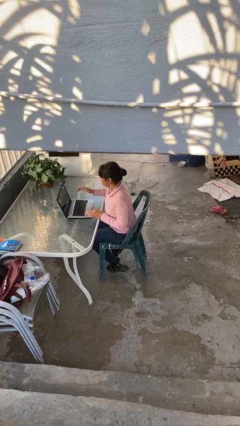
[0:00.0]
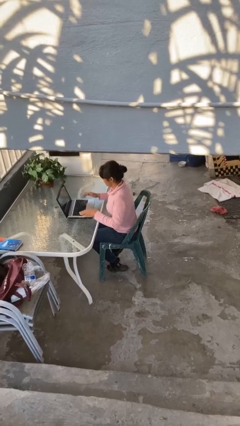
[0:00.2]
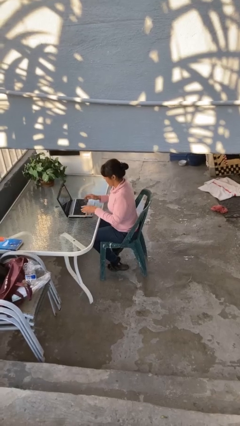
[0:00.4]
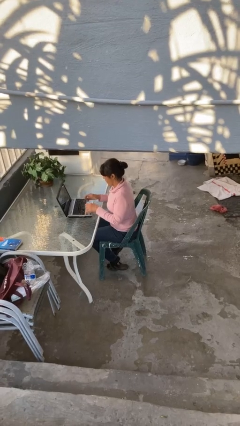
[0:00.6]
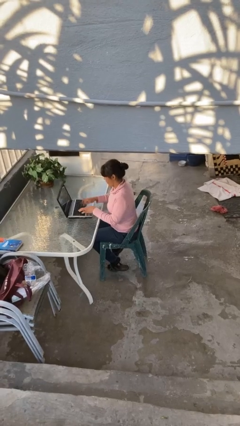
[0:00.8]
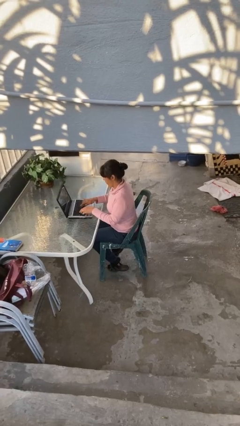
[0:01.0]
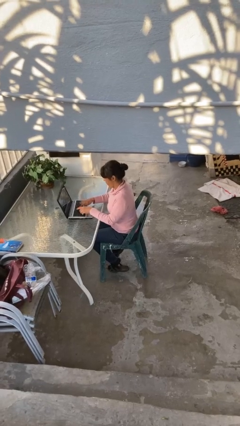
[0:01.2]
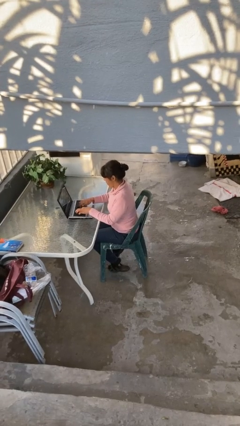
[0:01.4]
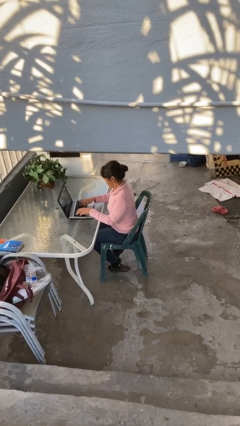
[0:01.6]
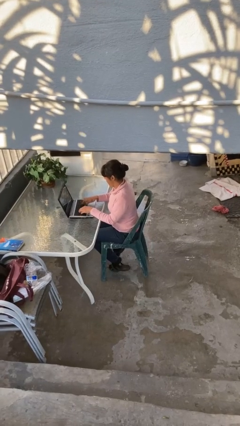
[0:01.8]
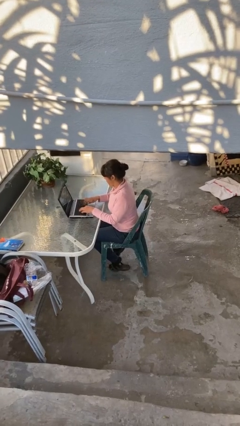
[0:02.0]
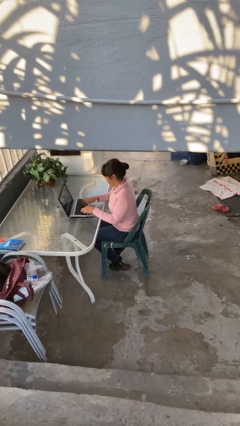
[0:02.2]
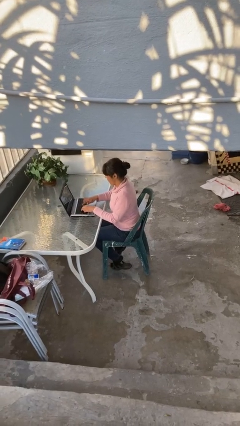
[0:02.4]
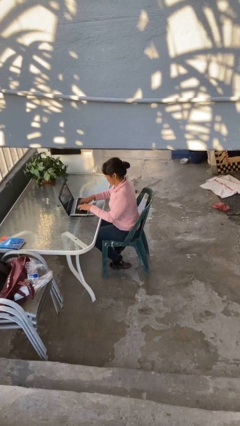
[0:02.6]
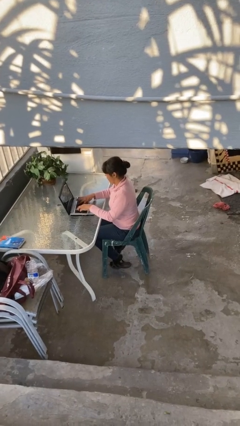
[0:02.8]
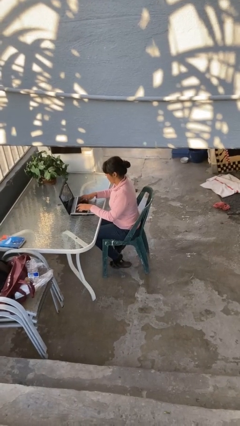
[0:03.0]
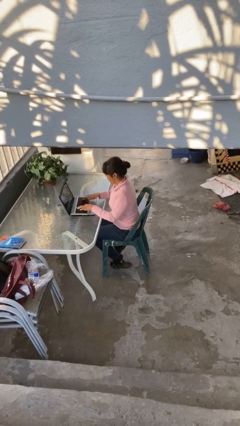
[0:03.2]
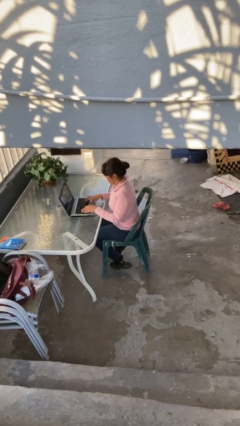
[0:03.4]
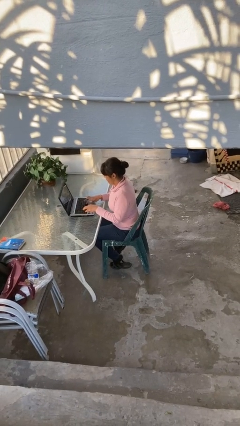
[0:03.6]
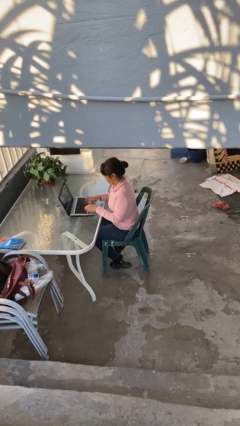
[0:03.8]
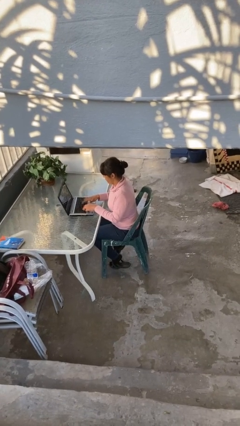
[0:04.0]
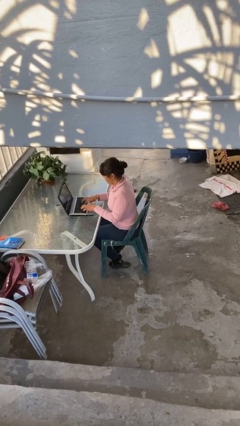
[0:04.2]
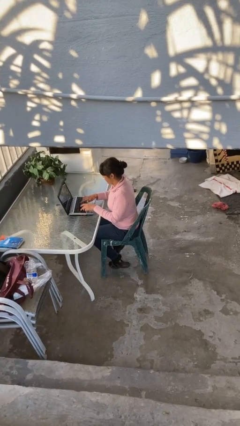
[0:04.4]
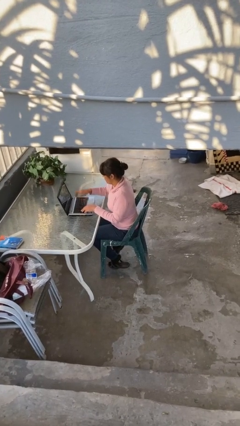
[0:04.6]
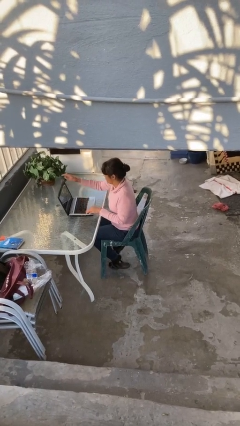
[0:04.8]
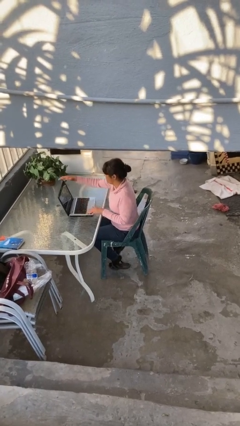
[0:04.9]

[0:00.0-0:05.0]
person interacts with laptop

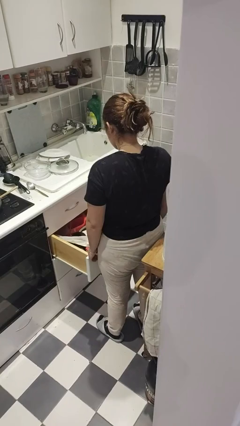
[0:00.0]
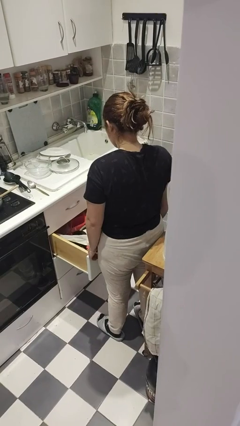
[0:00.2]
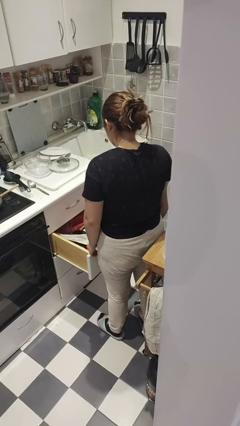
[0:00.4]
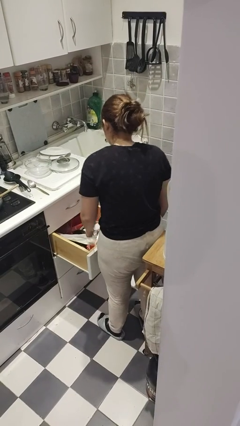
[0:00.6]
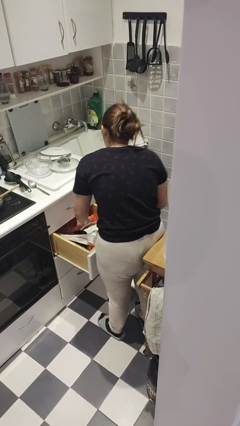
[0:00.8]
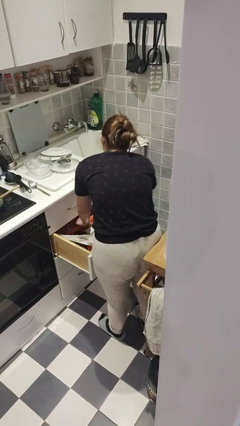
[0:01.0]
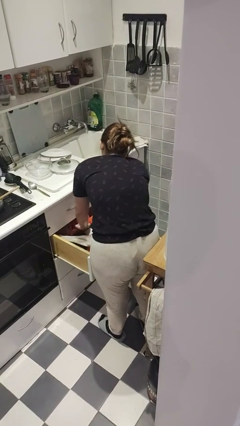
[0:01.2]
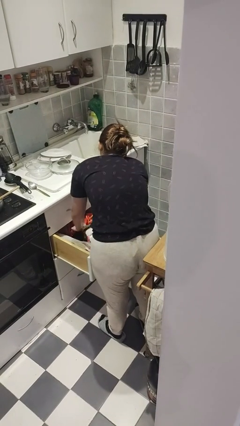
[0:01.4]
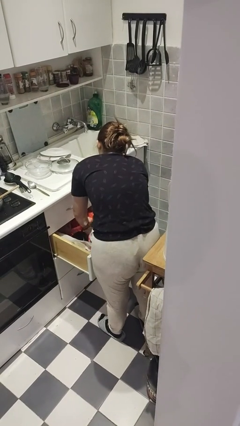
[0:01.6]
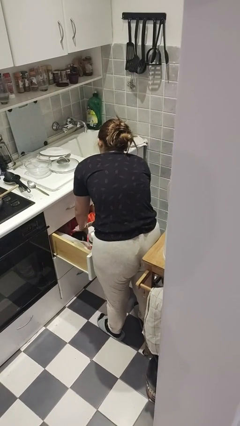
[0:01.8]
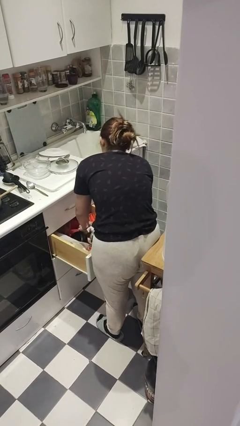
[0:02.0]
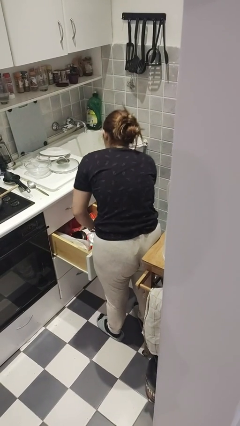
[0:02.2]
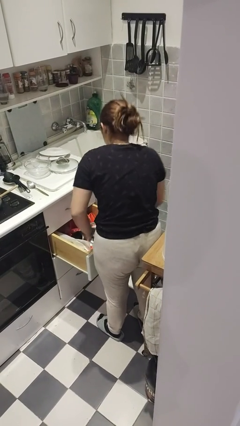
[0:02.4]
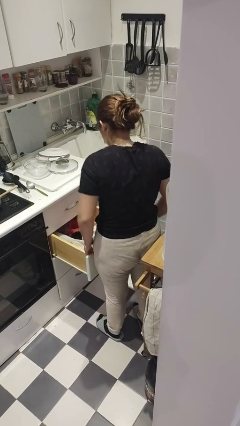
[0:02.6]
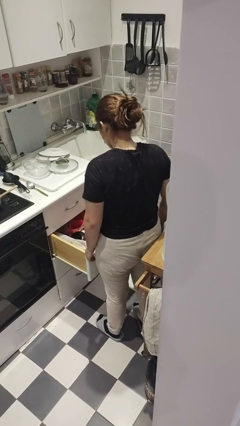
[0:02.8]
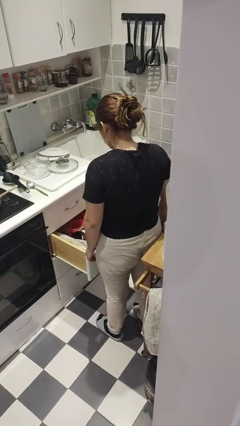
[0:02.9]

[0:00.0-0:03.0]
person searches in kitchen drawer

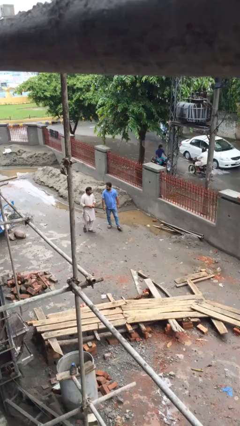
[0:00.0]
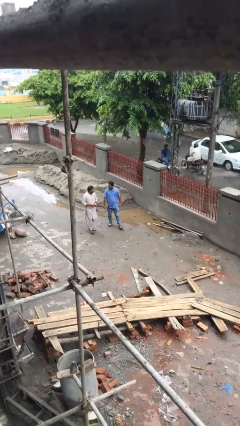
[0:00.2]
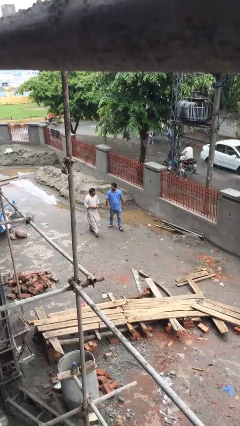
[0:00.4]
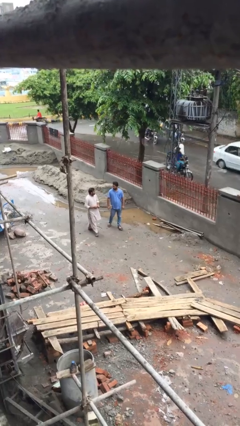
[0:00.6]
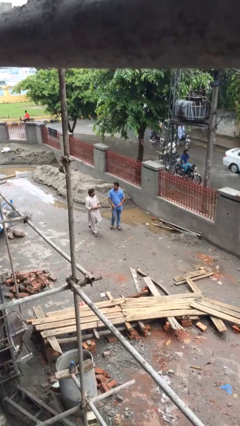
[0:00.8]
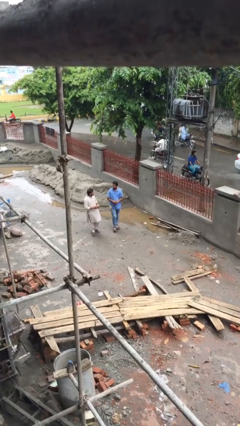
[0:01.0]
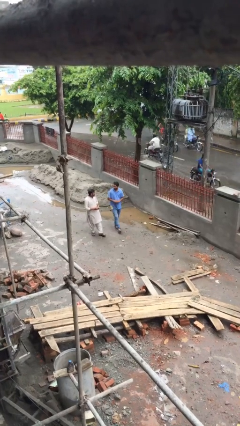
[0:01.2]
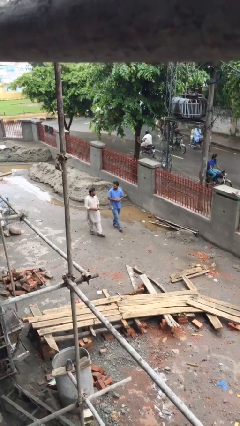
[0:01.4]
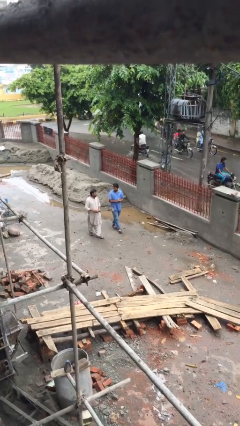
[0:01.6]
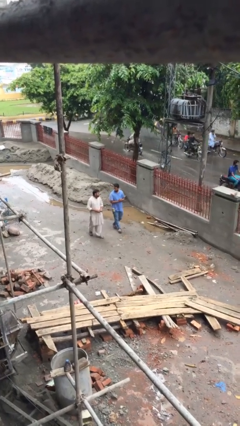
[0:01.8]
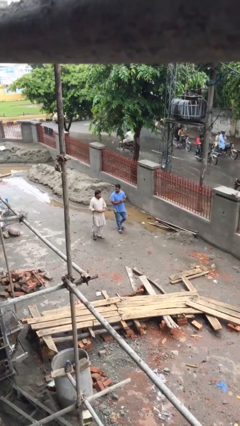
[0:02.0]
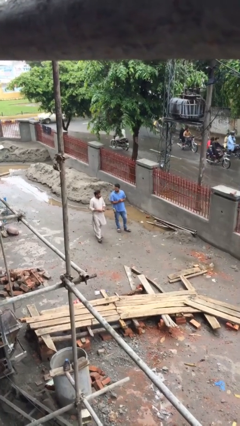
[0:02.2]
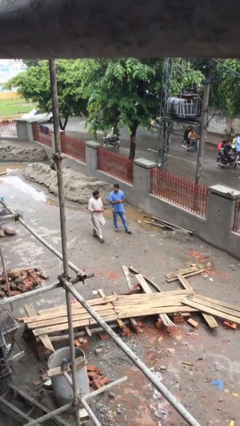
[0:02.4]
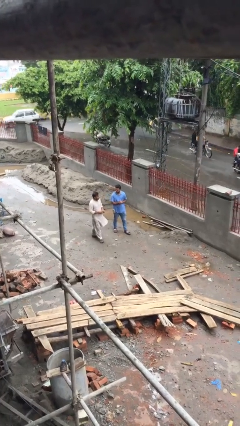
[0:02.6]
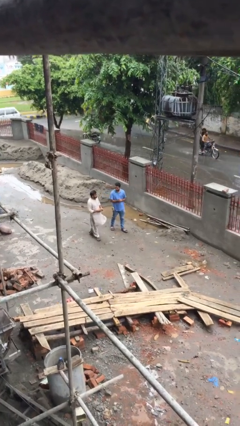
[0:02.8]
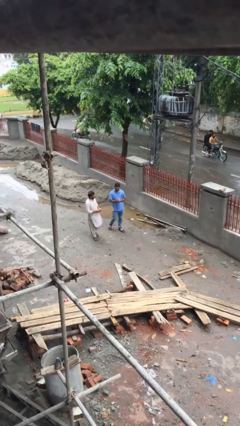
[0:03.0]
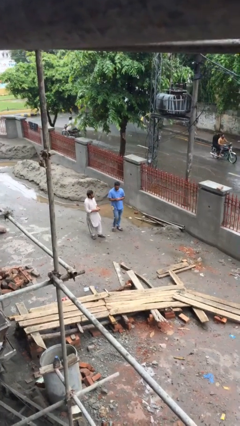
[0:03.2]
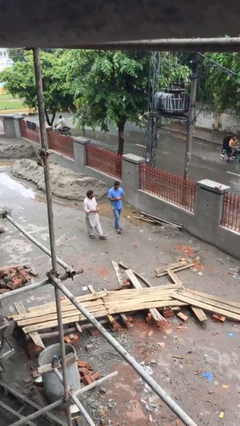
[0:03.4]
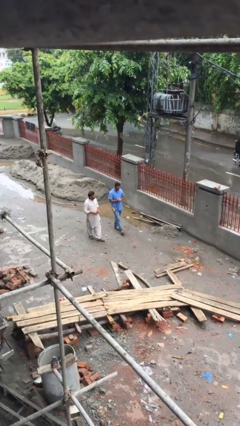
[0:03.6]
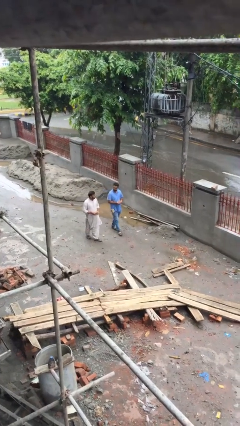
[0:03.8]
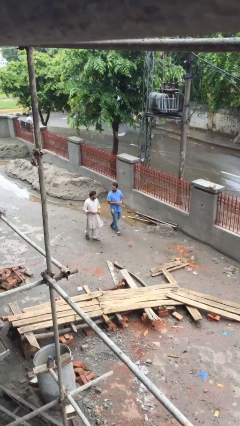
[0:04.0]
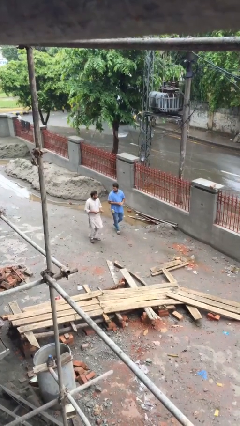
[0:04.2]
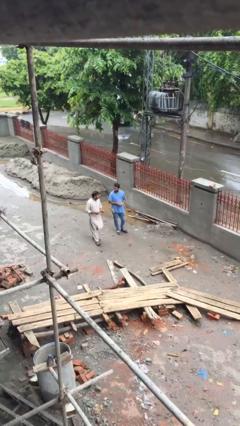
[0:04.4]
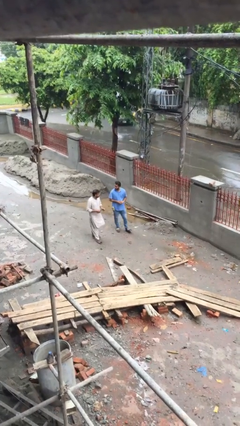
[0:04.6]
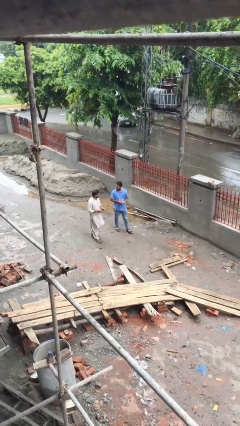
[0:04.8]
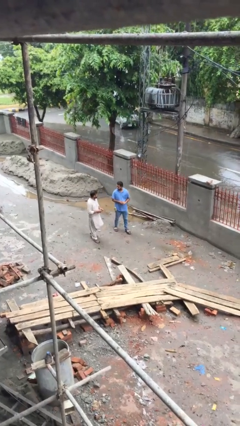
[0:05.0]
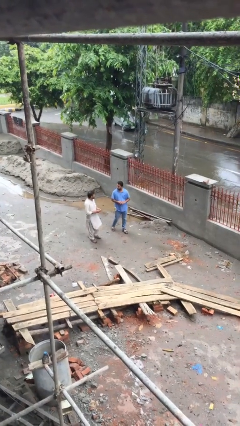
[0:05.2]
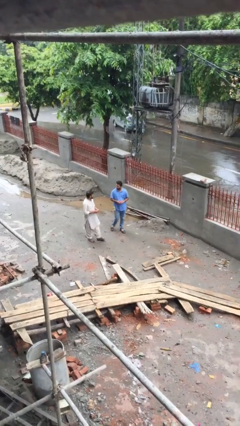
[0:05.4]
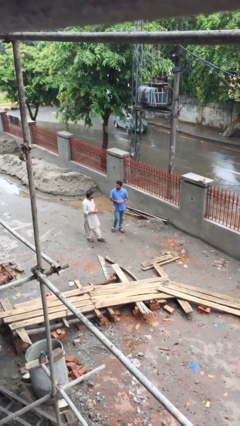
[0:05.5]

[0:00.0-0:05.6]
person talks to person

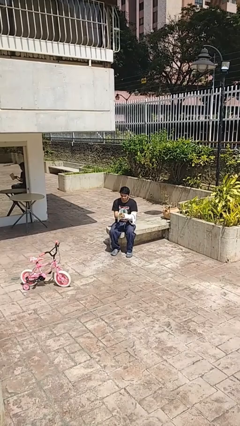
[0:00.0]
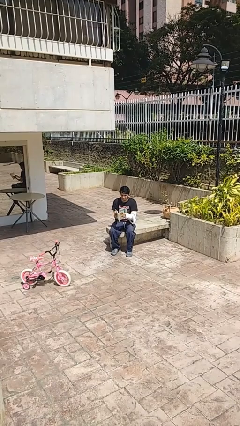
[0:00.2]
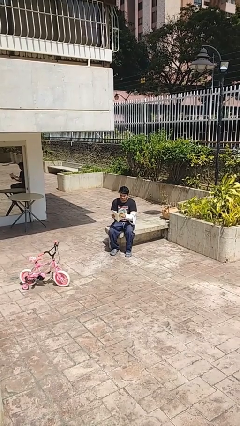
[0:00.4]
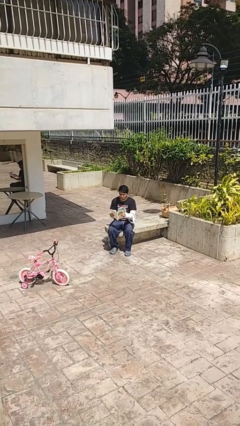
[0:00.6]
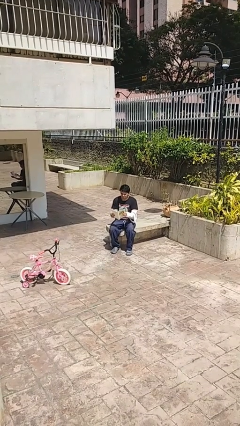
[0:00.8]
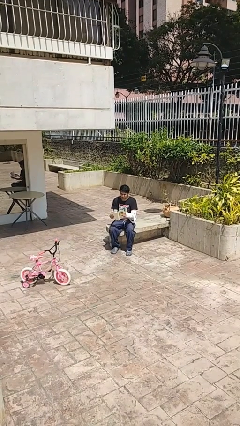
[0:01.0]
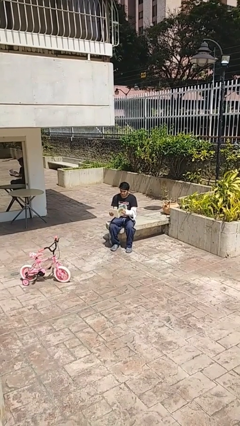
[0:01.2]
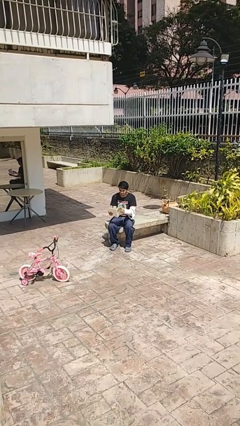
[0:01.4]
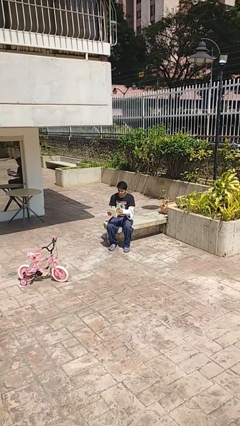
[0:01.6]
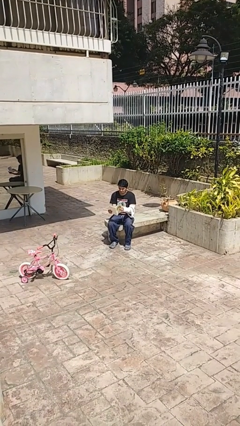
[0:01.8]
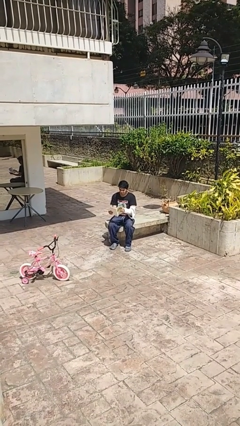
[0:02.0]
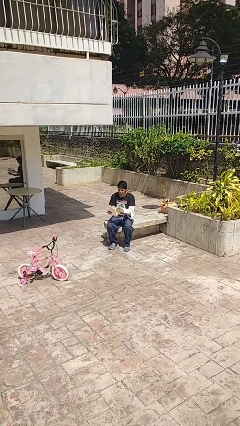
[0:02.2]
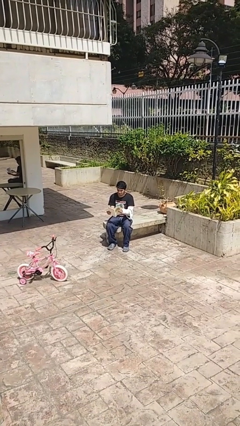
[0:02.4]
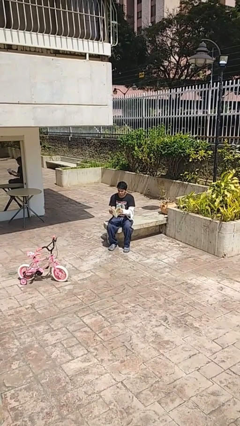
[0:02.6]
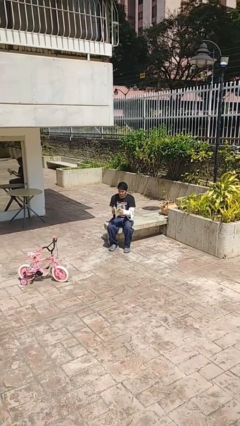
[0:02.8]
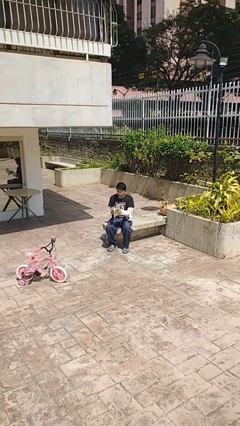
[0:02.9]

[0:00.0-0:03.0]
person reads document

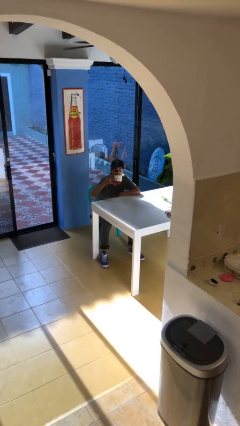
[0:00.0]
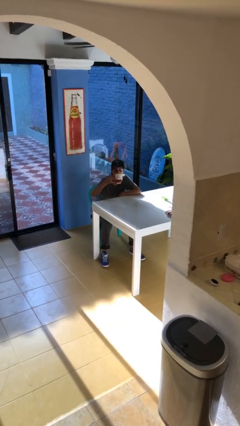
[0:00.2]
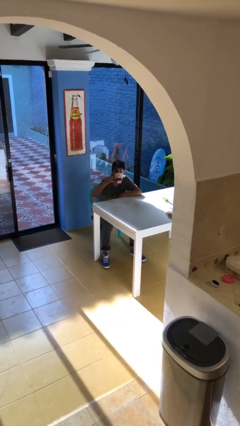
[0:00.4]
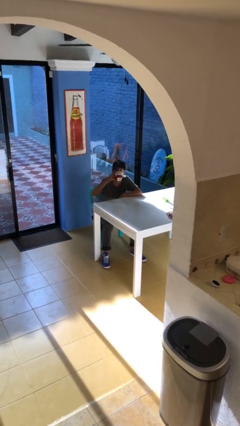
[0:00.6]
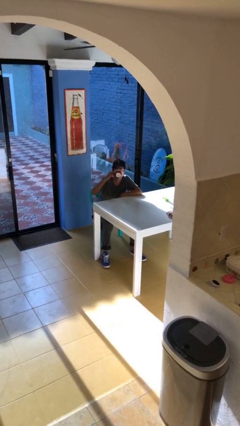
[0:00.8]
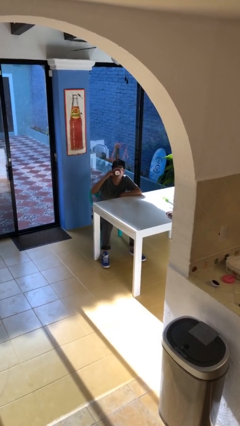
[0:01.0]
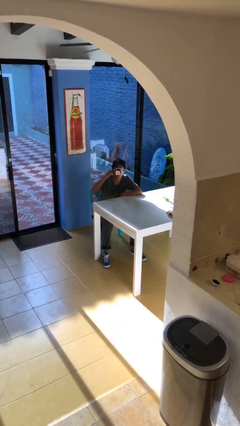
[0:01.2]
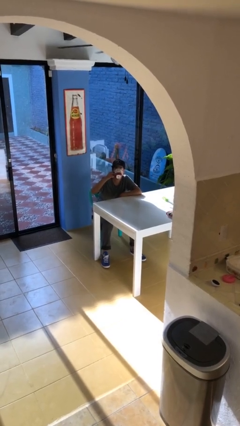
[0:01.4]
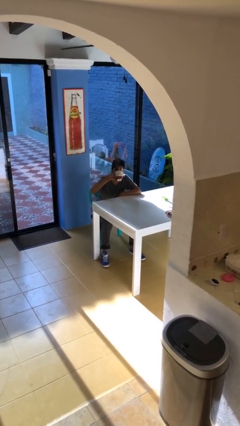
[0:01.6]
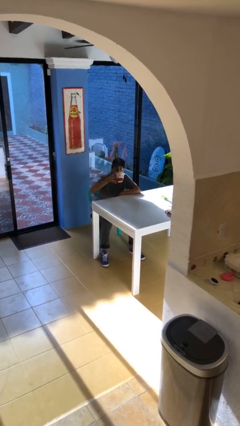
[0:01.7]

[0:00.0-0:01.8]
person drinks from mug
